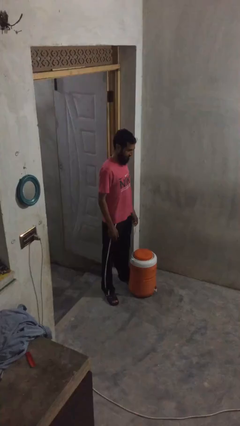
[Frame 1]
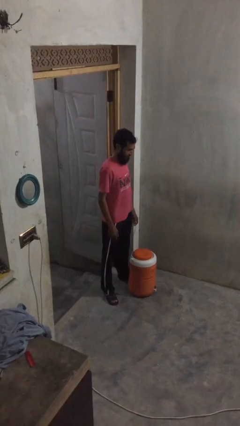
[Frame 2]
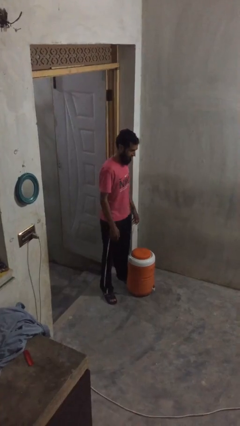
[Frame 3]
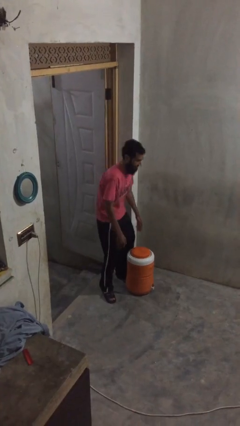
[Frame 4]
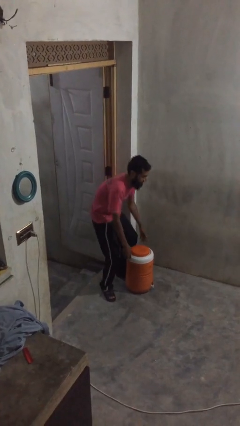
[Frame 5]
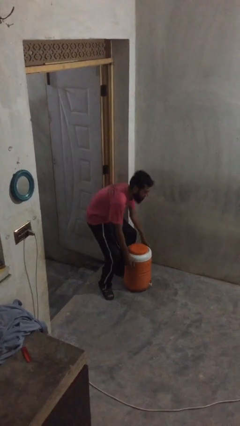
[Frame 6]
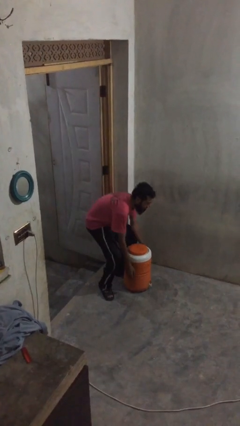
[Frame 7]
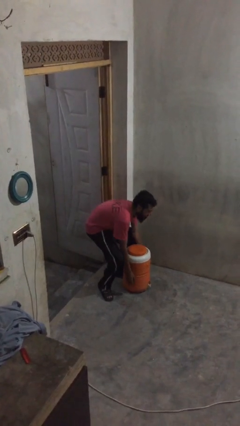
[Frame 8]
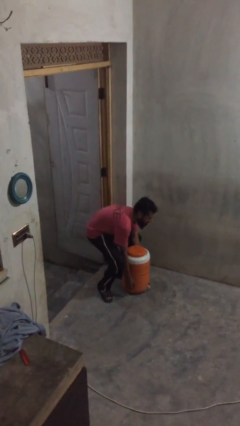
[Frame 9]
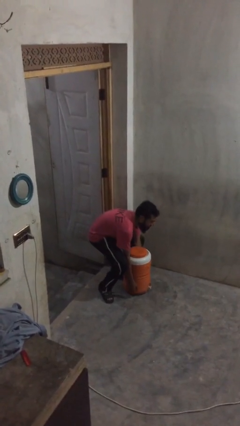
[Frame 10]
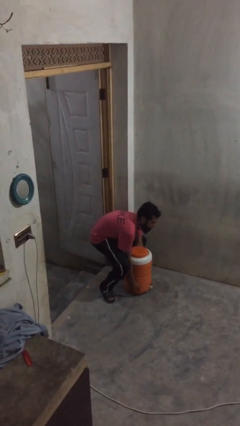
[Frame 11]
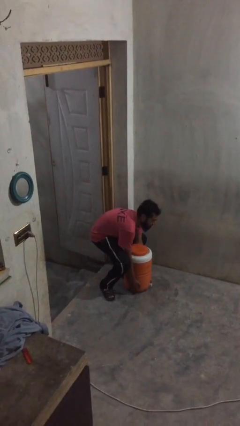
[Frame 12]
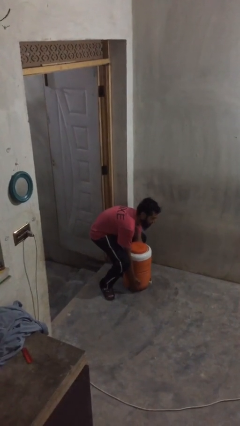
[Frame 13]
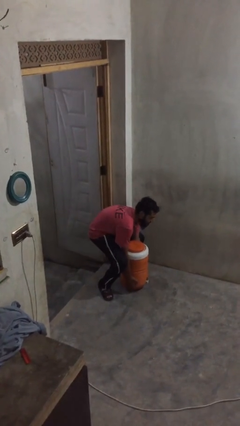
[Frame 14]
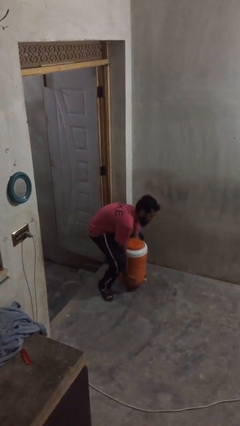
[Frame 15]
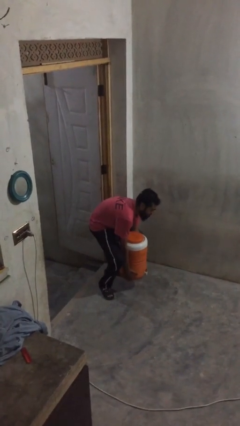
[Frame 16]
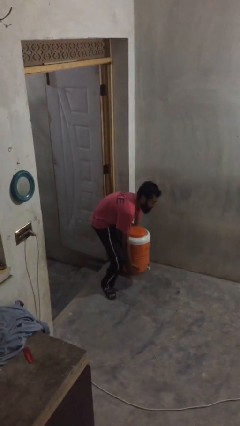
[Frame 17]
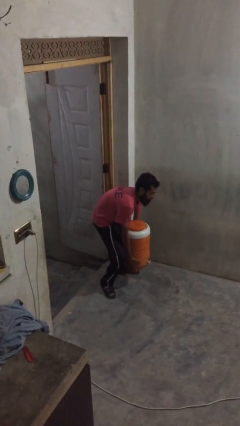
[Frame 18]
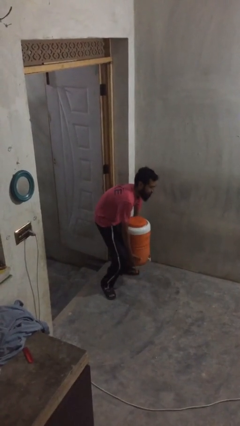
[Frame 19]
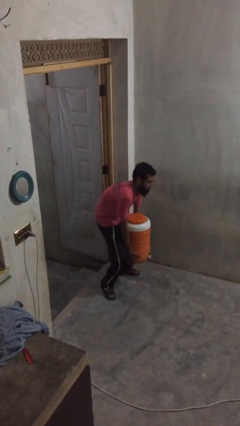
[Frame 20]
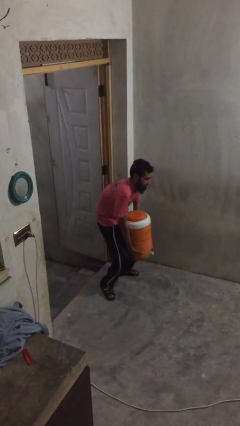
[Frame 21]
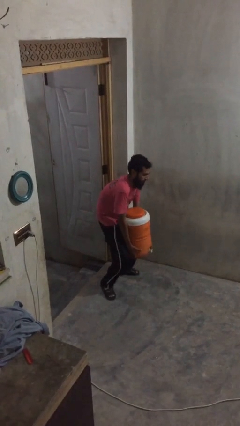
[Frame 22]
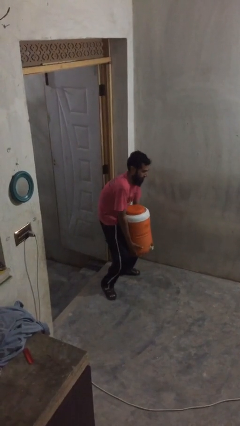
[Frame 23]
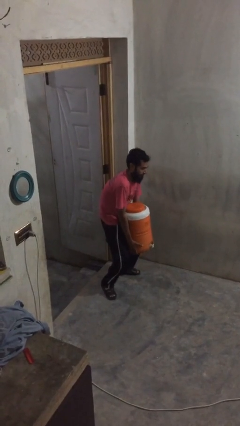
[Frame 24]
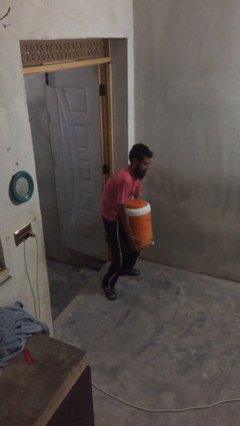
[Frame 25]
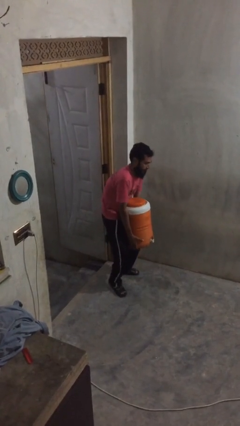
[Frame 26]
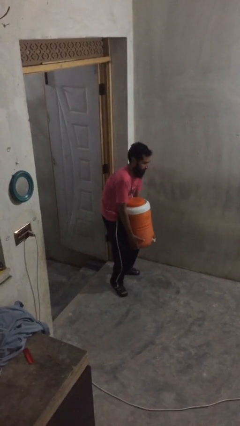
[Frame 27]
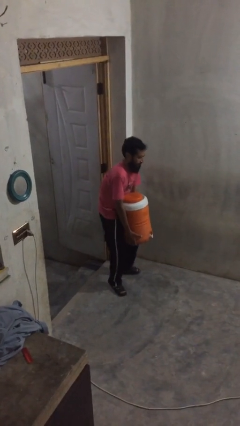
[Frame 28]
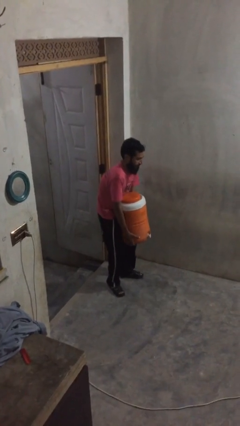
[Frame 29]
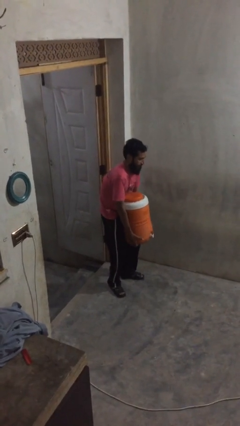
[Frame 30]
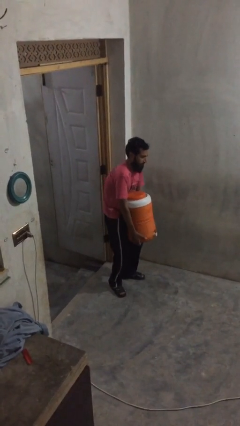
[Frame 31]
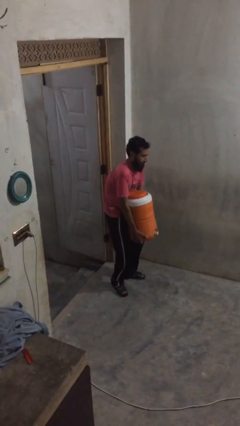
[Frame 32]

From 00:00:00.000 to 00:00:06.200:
person picks up object from floor

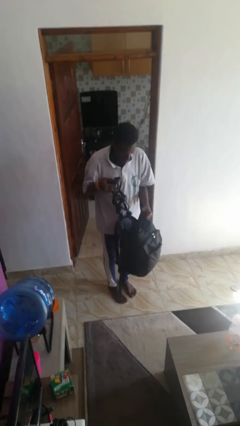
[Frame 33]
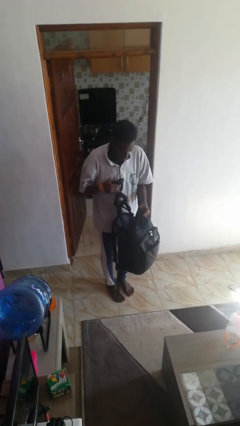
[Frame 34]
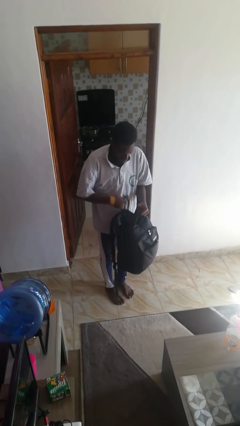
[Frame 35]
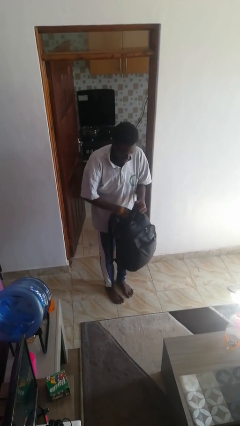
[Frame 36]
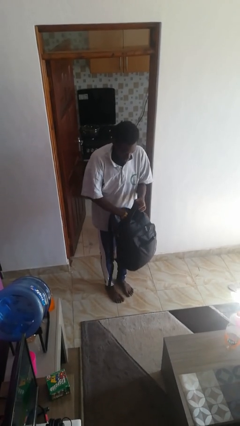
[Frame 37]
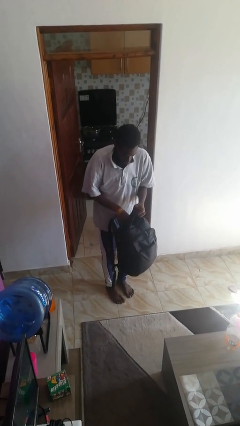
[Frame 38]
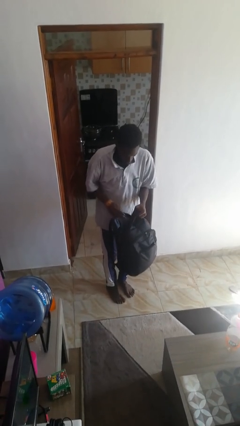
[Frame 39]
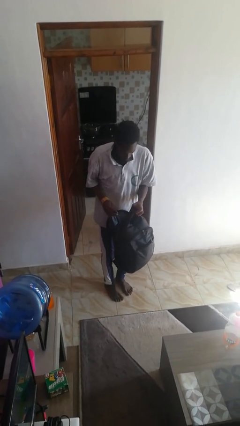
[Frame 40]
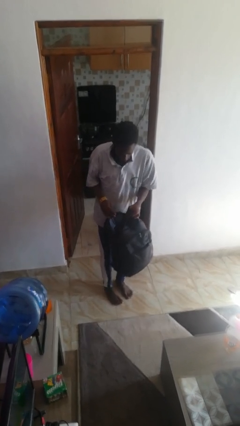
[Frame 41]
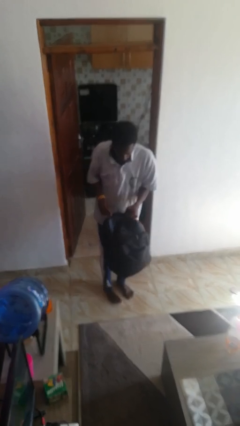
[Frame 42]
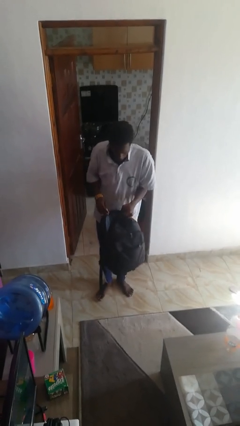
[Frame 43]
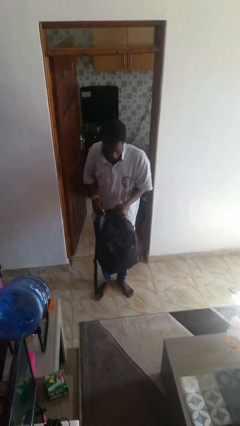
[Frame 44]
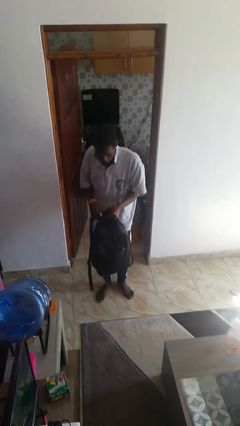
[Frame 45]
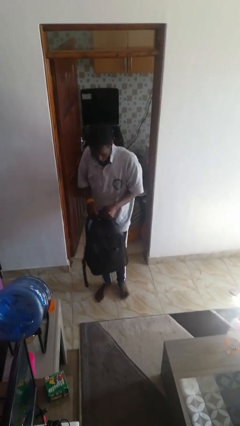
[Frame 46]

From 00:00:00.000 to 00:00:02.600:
person puts object into backpack

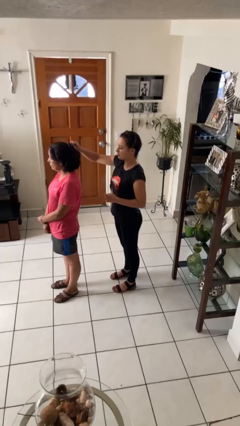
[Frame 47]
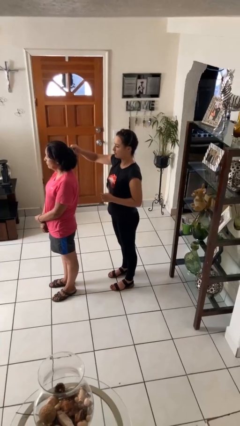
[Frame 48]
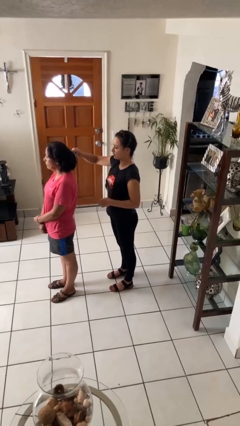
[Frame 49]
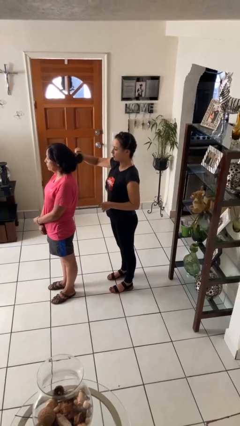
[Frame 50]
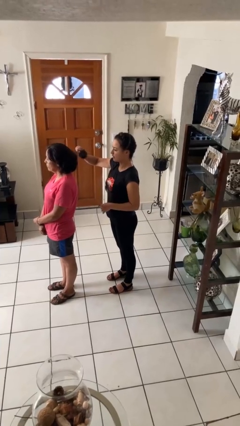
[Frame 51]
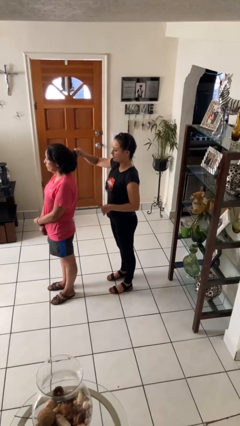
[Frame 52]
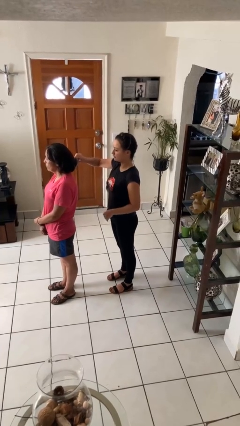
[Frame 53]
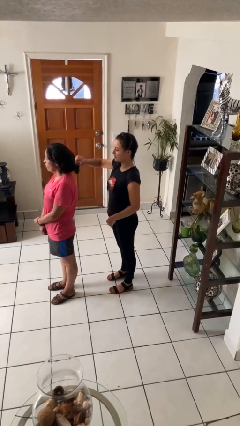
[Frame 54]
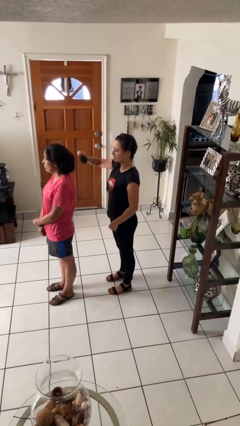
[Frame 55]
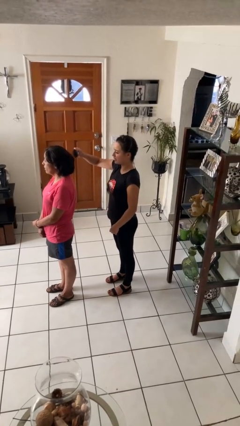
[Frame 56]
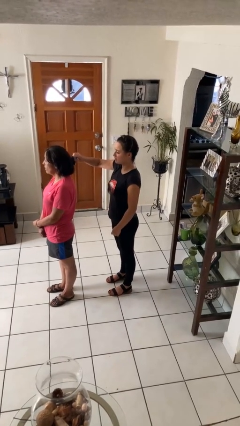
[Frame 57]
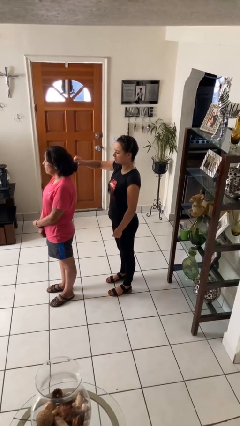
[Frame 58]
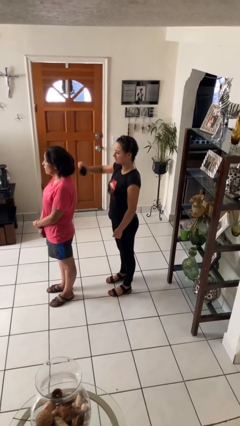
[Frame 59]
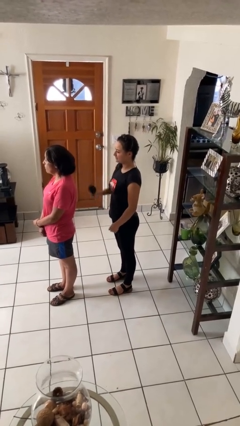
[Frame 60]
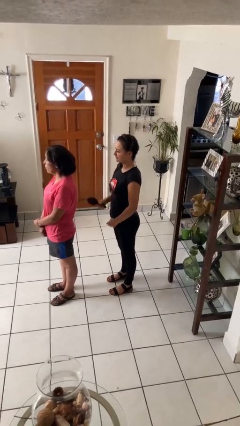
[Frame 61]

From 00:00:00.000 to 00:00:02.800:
person brushes hair of person

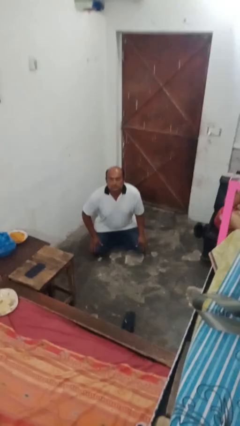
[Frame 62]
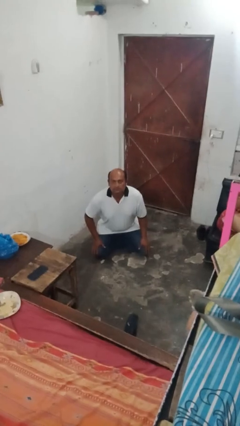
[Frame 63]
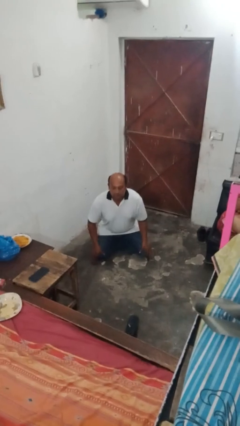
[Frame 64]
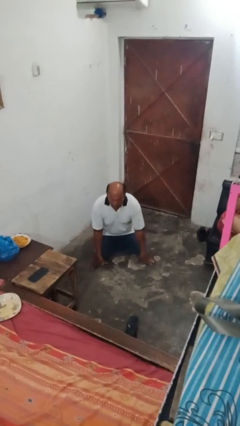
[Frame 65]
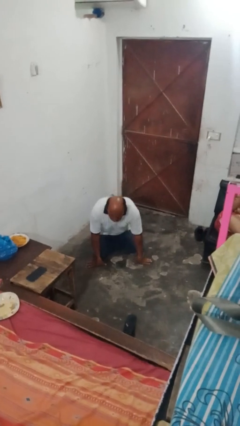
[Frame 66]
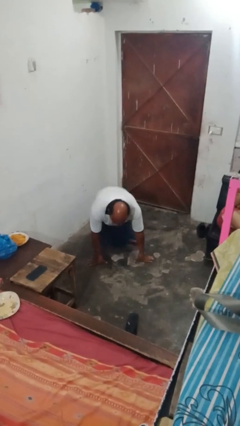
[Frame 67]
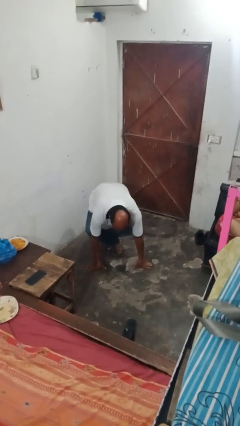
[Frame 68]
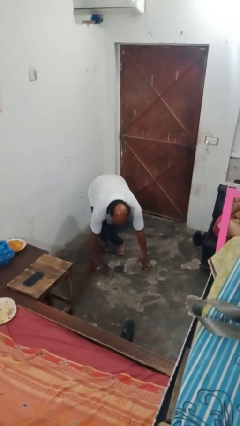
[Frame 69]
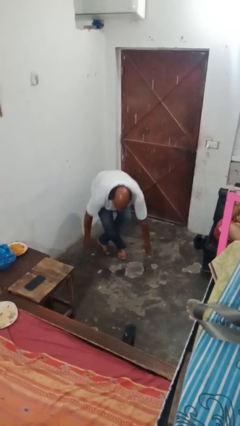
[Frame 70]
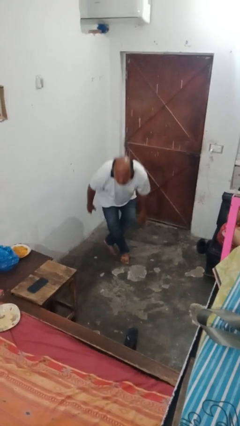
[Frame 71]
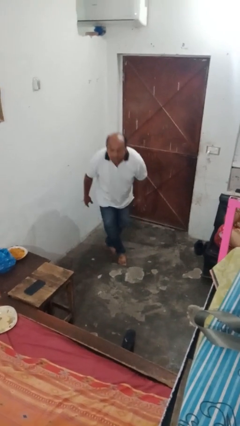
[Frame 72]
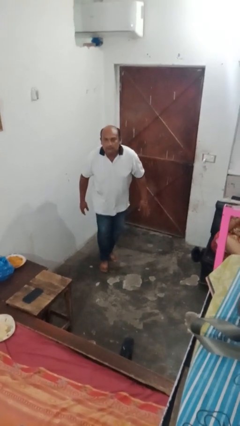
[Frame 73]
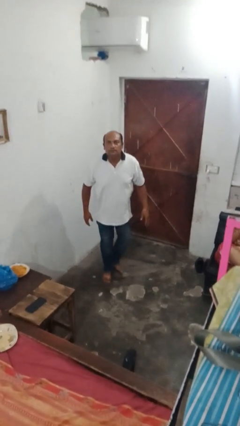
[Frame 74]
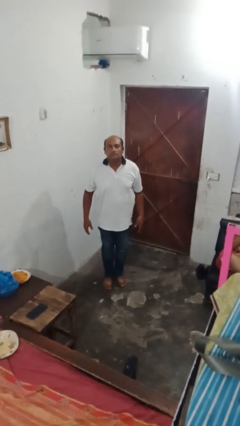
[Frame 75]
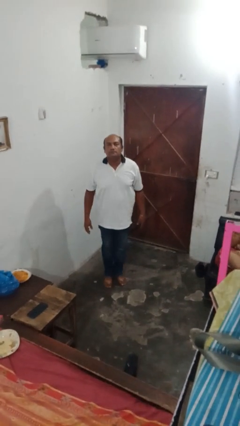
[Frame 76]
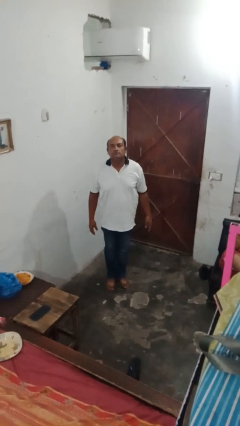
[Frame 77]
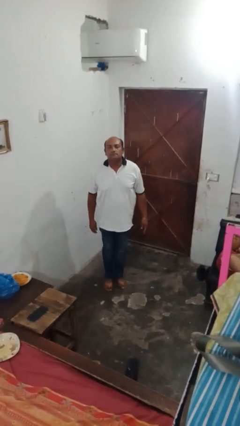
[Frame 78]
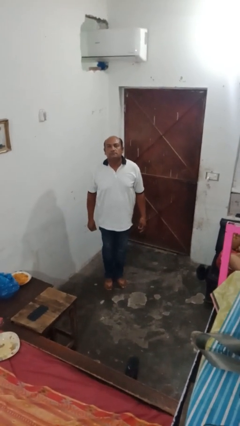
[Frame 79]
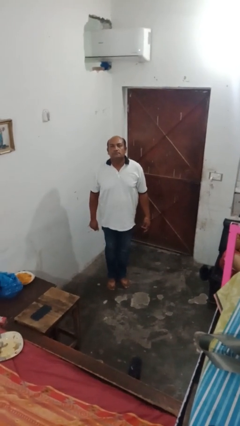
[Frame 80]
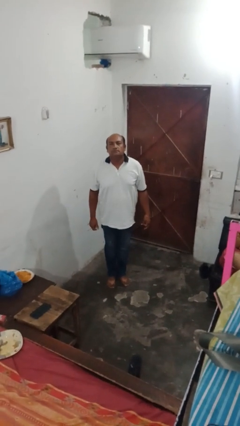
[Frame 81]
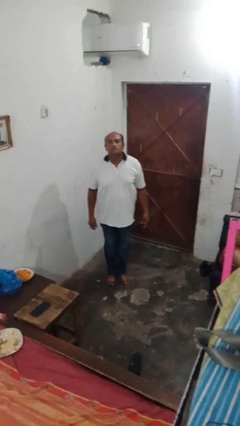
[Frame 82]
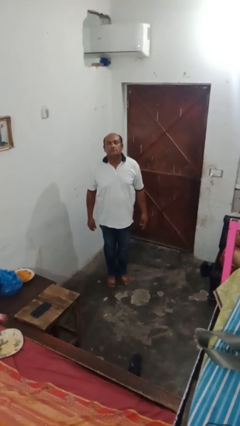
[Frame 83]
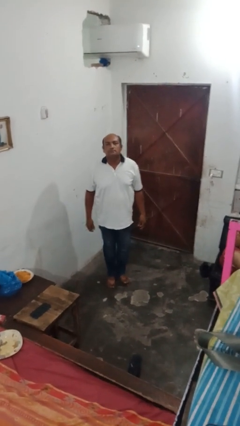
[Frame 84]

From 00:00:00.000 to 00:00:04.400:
person stands up from floor

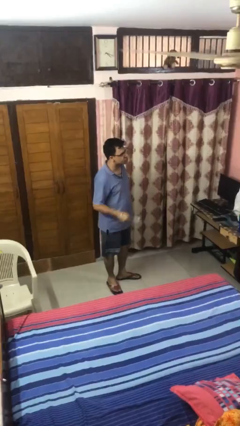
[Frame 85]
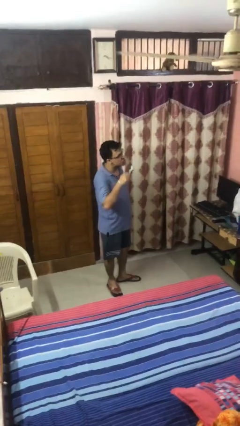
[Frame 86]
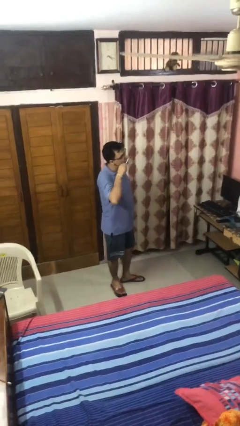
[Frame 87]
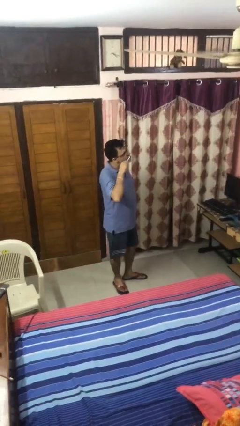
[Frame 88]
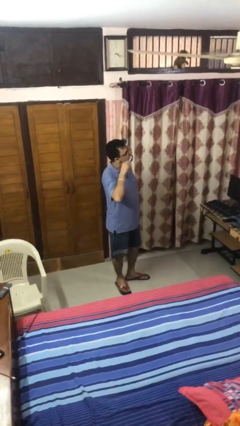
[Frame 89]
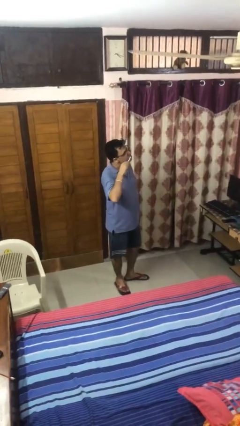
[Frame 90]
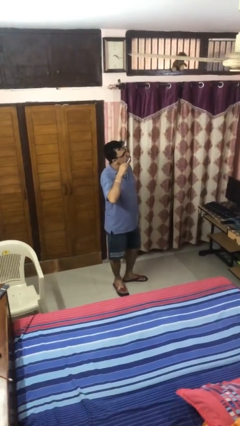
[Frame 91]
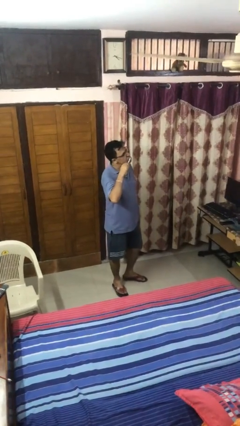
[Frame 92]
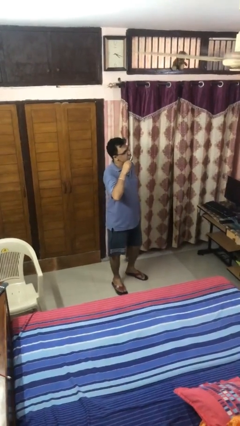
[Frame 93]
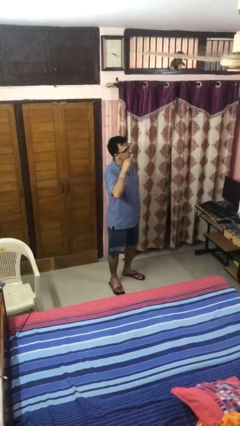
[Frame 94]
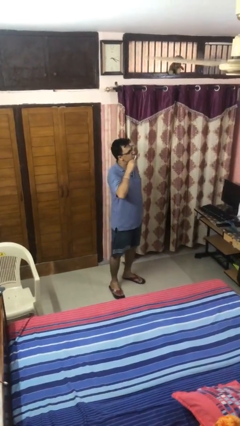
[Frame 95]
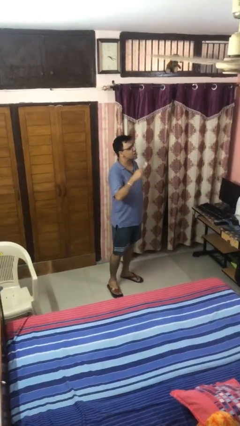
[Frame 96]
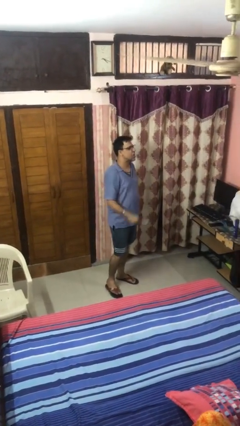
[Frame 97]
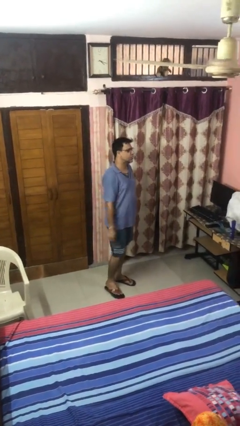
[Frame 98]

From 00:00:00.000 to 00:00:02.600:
person brushes teeth
